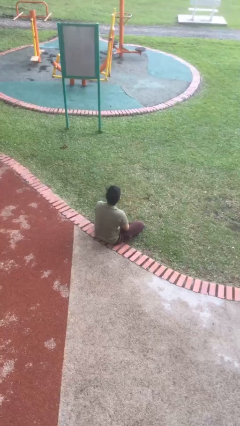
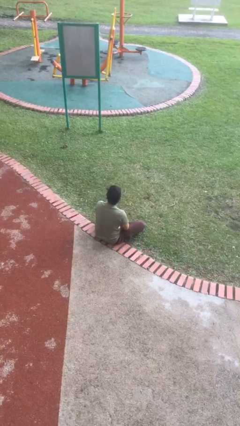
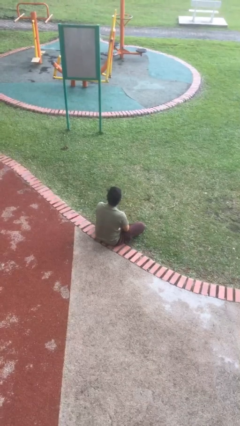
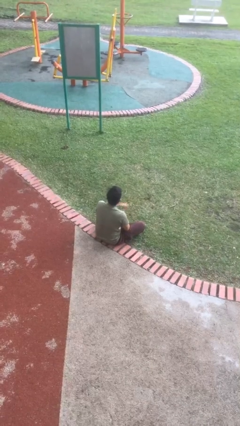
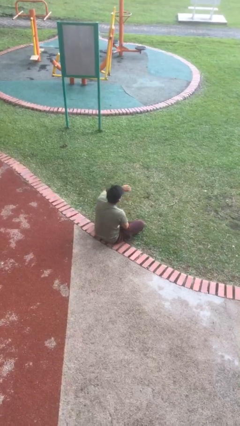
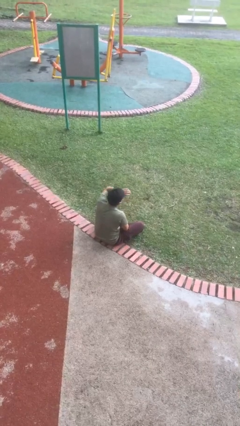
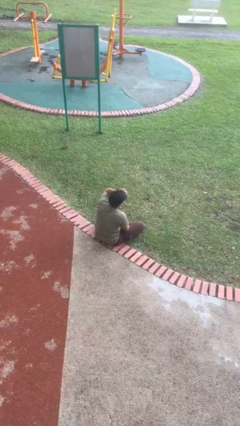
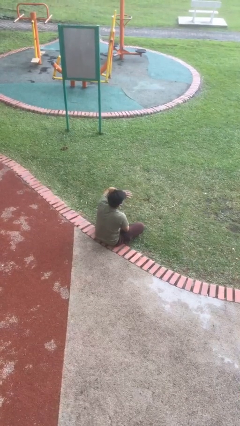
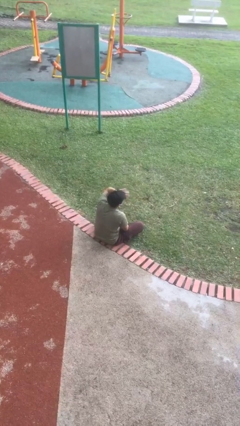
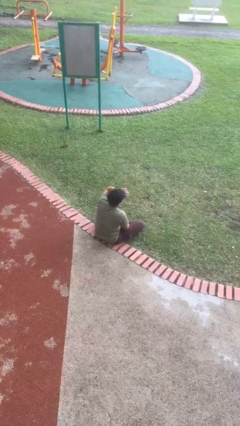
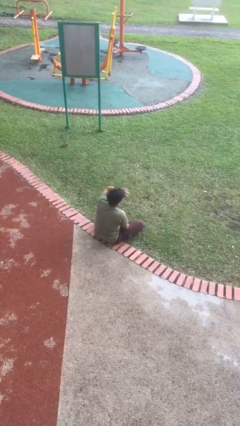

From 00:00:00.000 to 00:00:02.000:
person rubs eyes

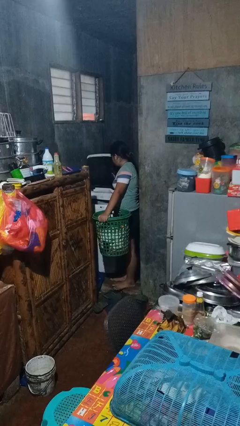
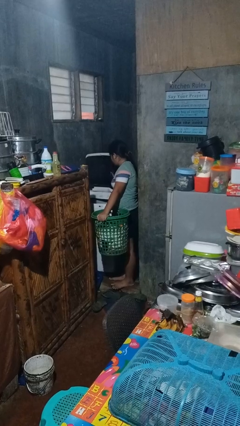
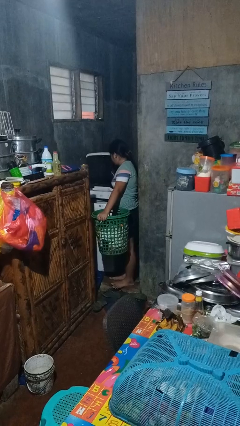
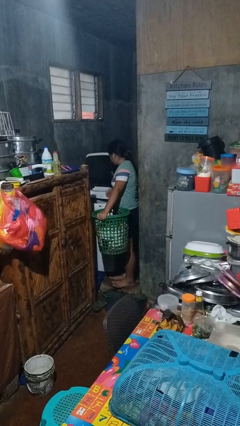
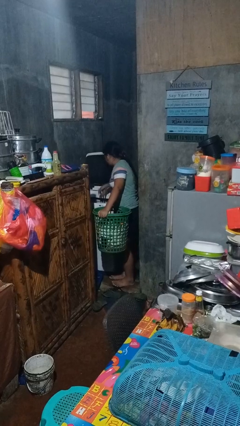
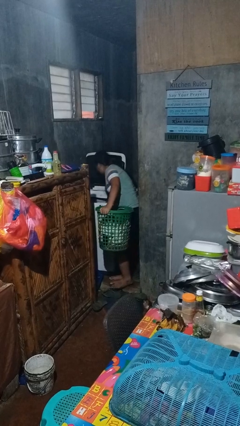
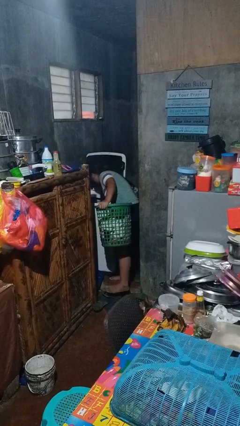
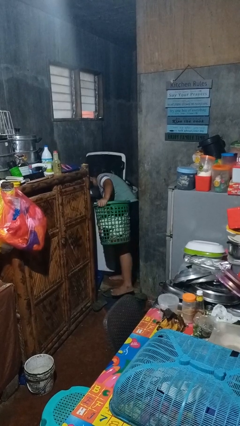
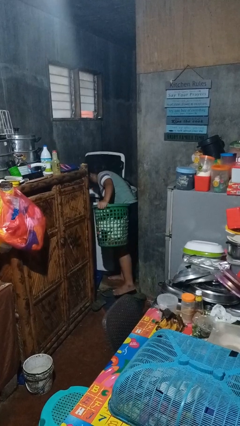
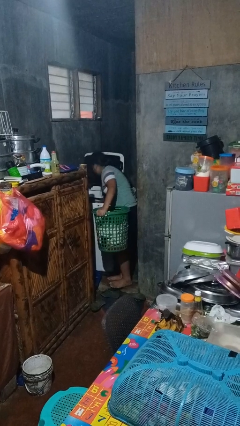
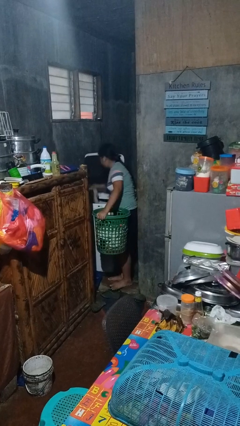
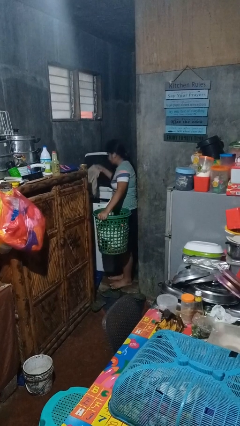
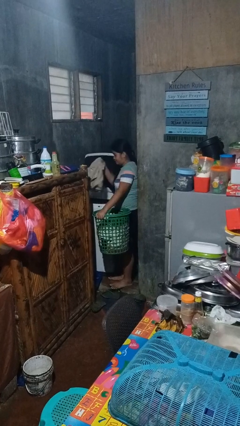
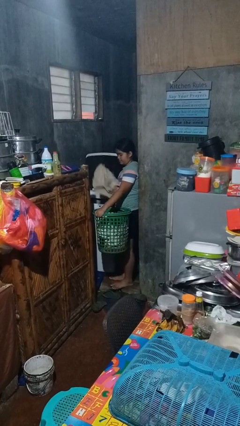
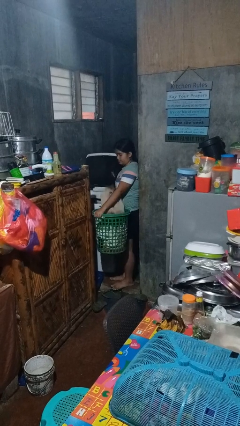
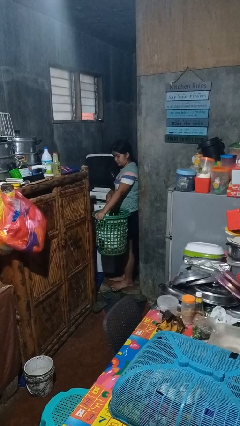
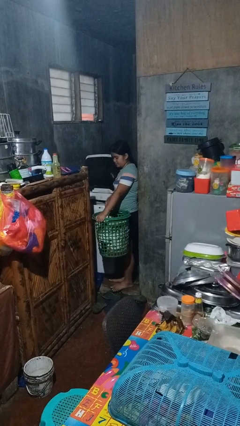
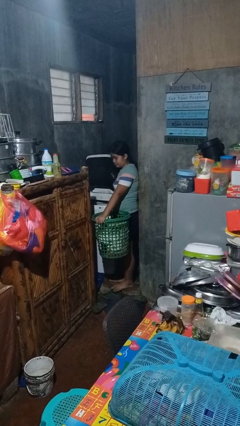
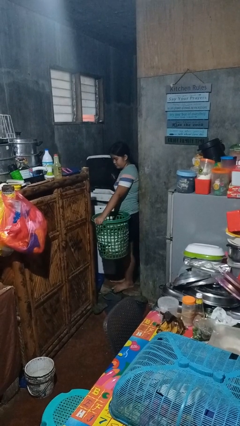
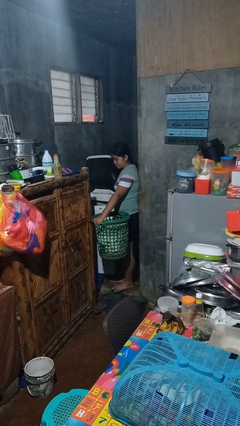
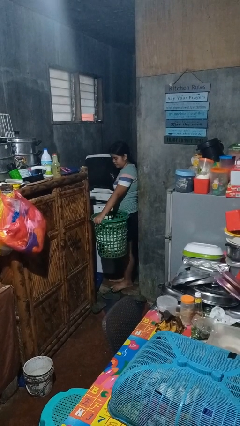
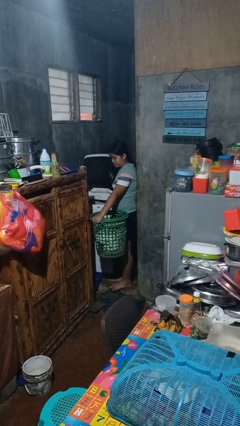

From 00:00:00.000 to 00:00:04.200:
person unloads clotheswasher

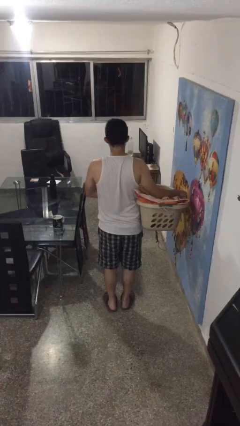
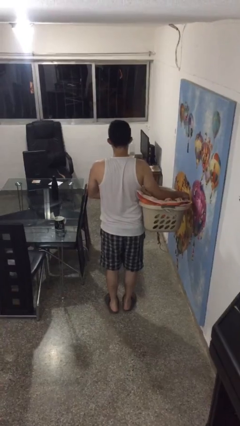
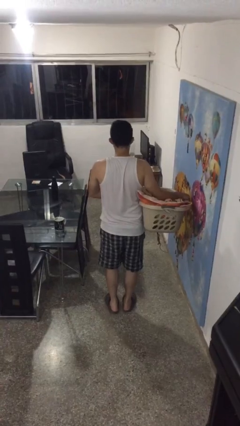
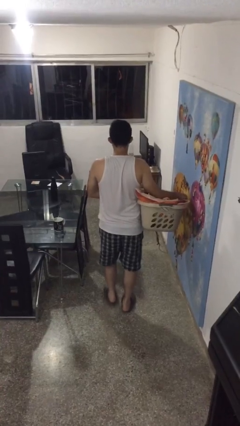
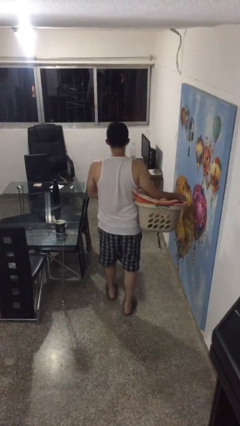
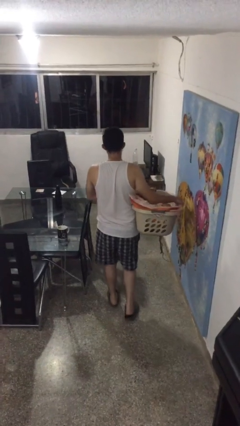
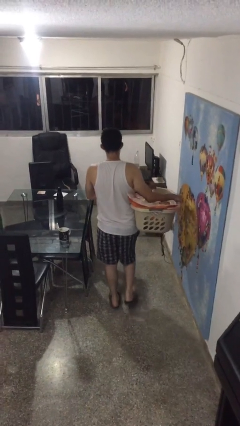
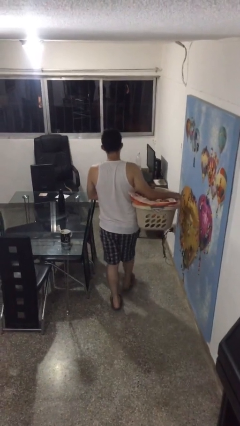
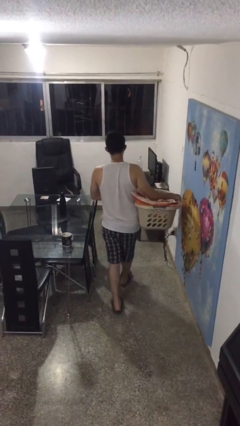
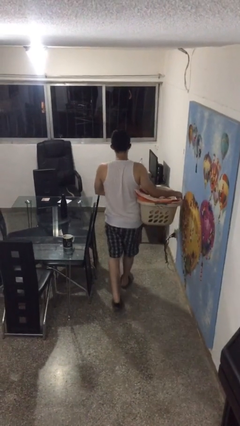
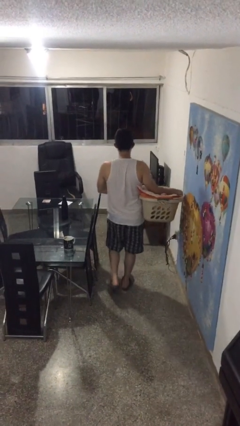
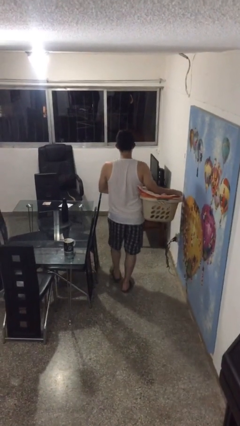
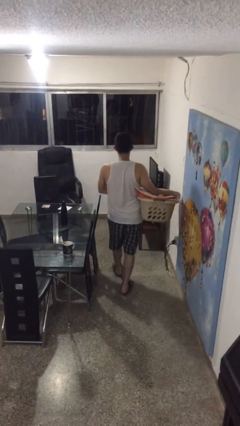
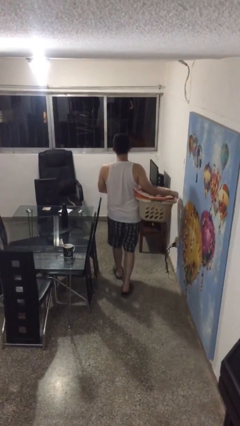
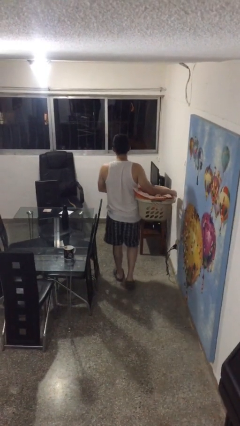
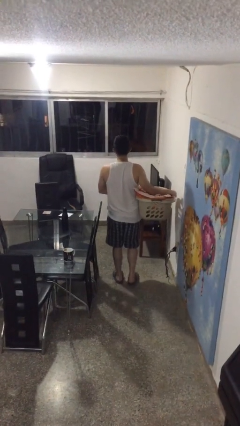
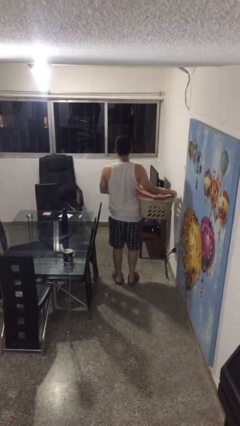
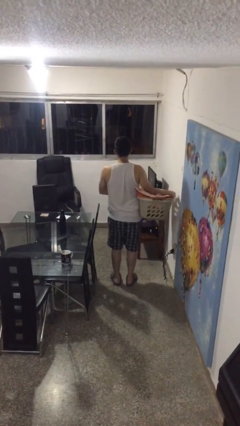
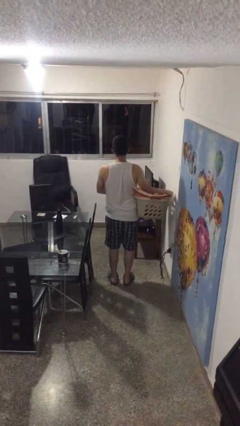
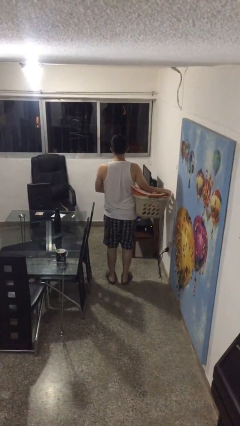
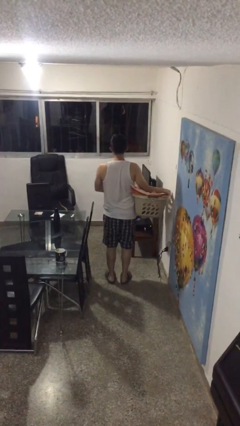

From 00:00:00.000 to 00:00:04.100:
person carries laundry basket

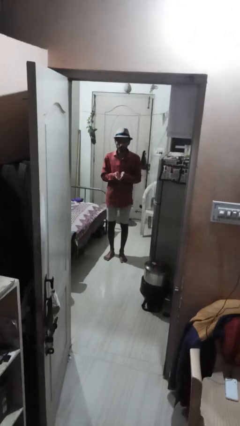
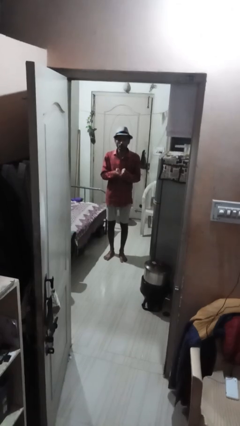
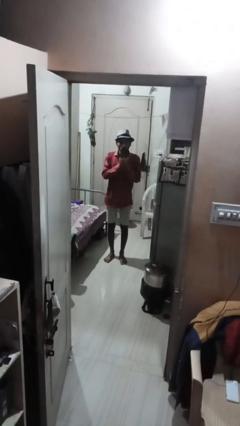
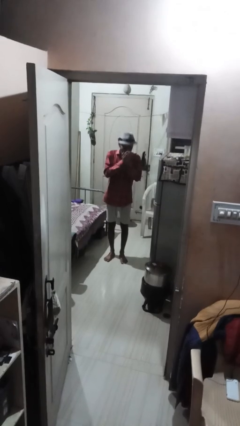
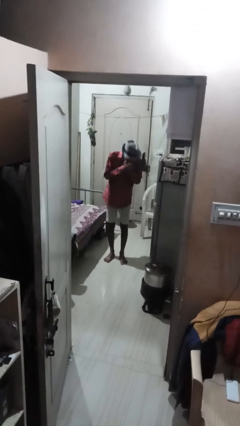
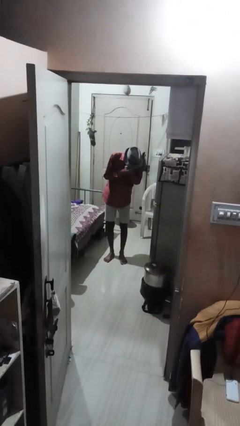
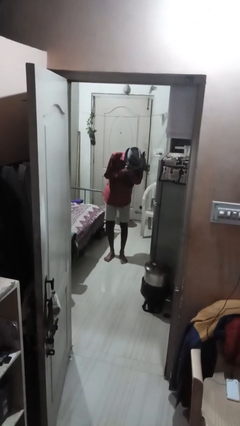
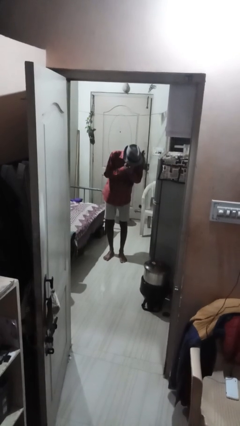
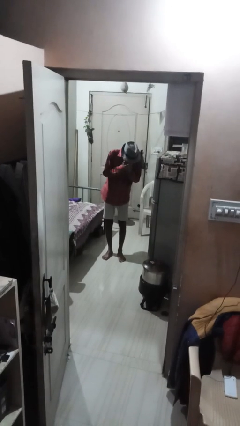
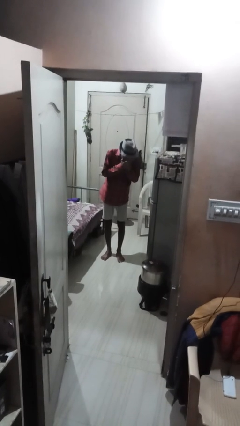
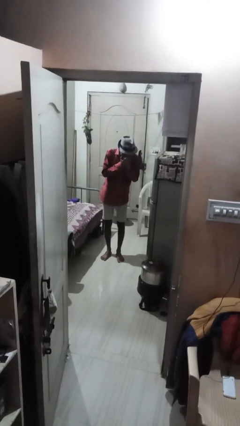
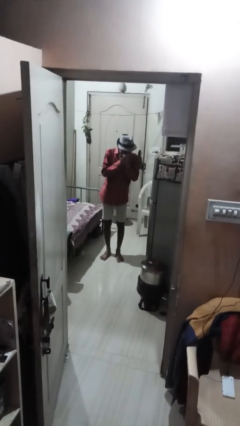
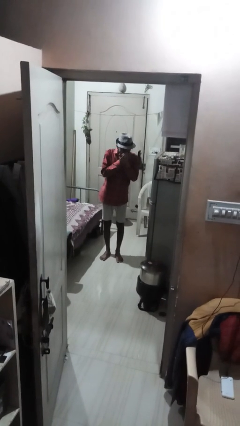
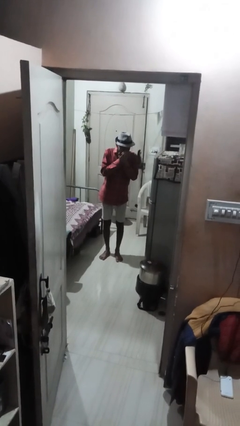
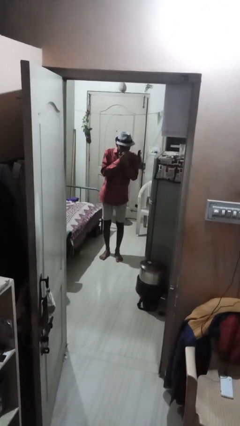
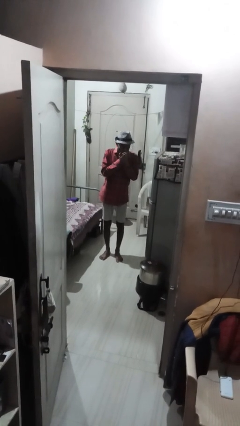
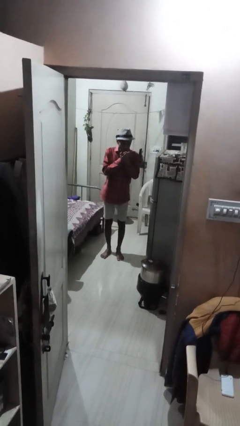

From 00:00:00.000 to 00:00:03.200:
person sneezes into hand

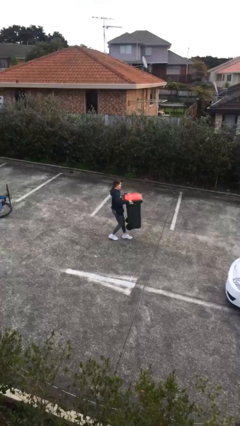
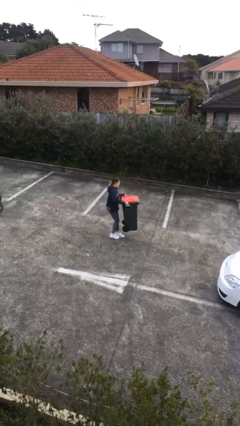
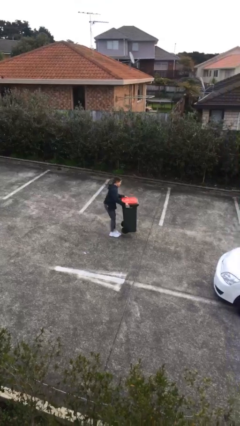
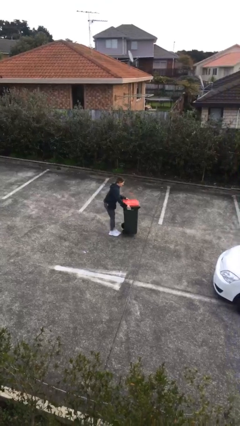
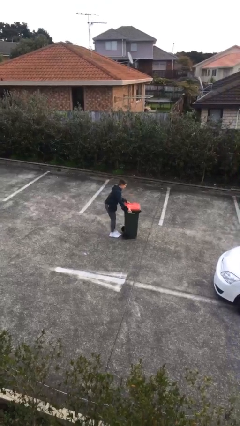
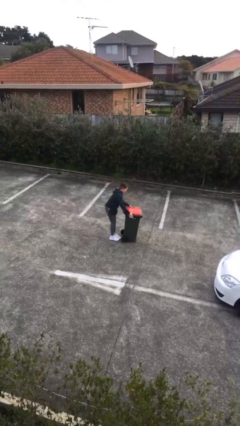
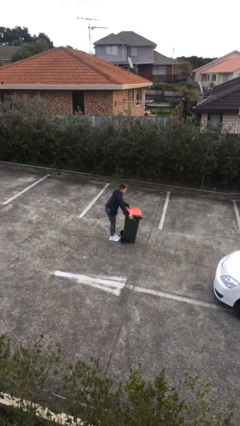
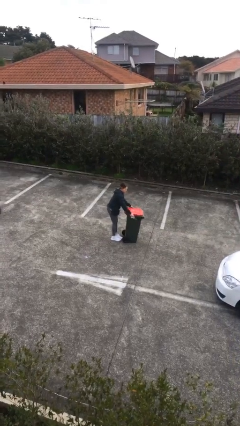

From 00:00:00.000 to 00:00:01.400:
person puts down object on floor

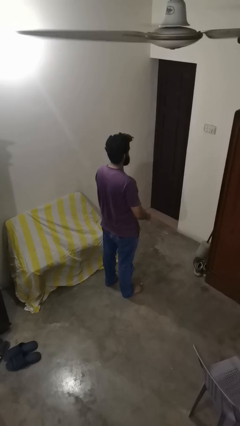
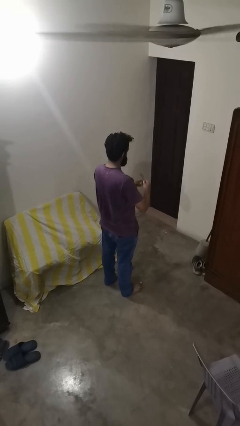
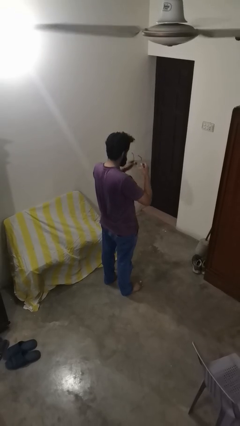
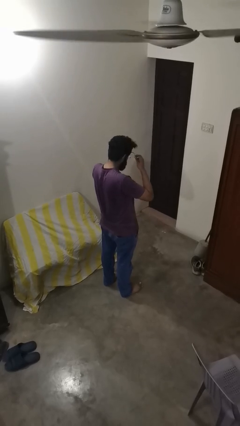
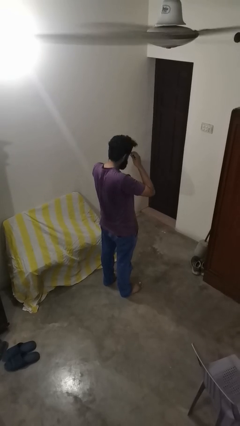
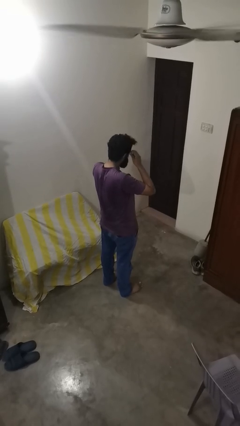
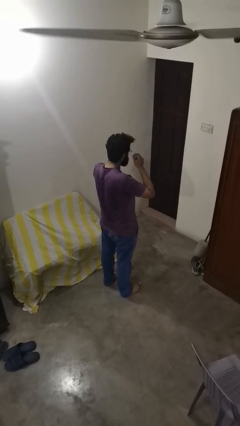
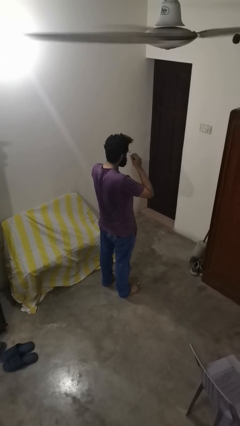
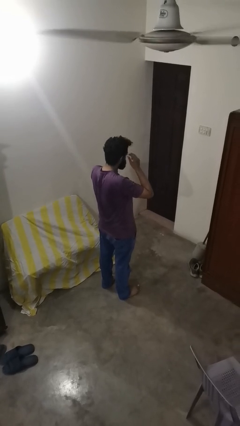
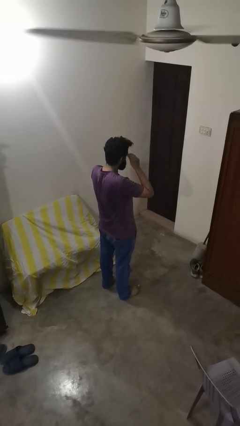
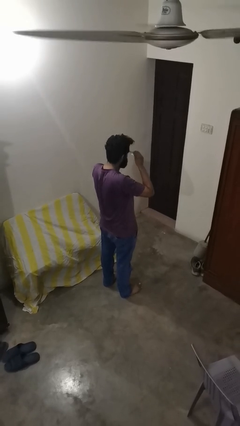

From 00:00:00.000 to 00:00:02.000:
person puts on glasses

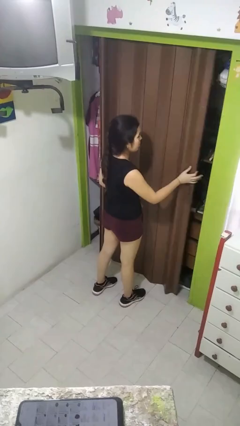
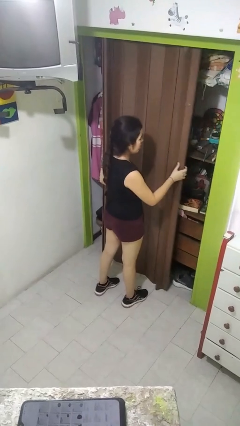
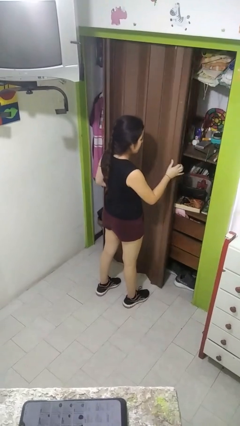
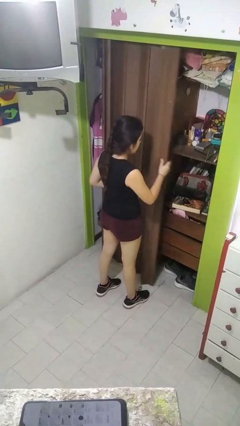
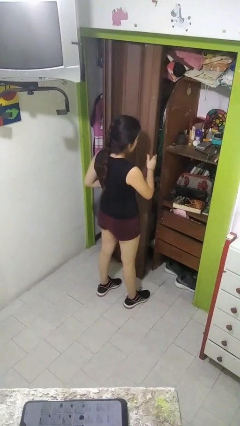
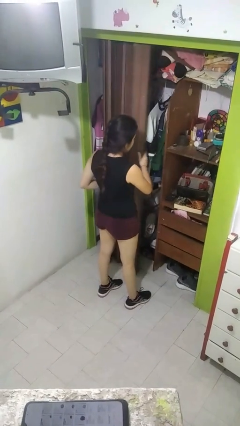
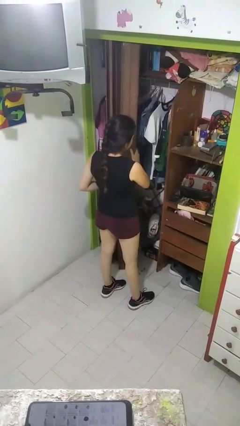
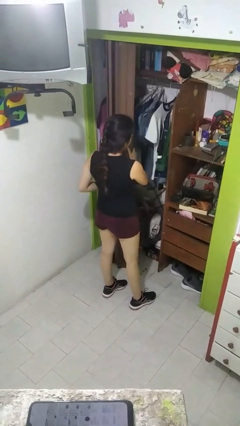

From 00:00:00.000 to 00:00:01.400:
person opens closet door
